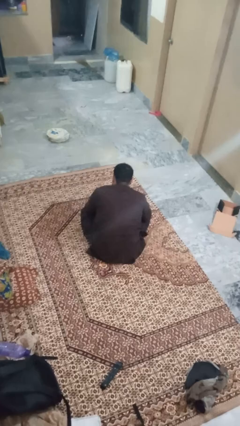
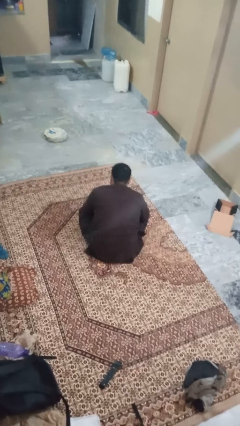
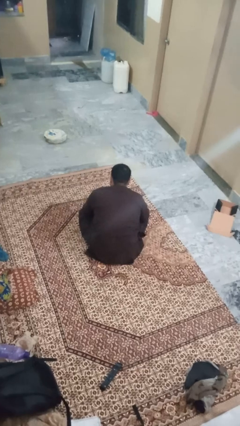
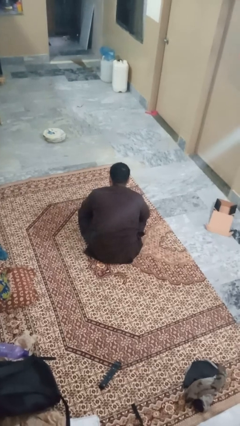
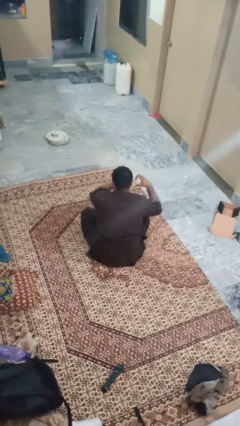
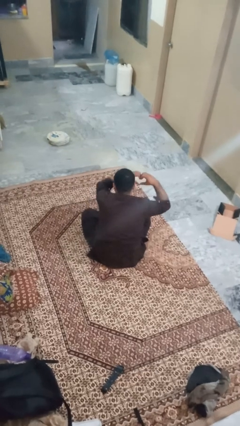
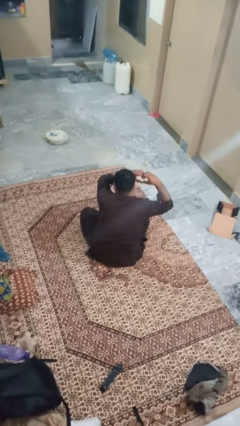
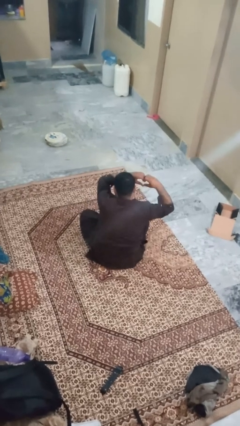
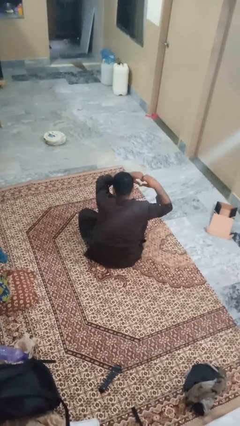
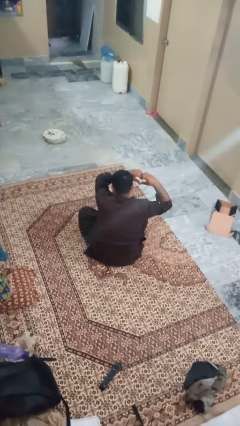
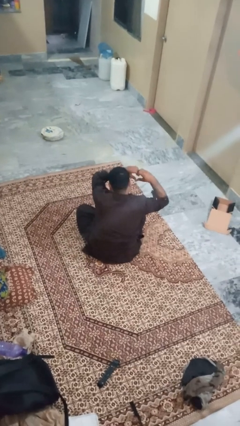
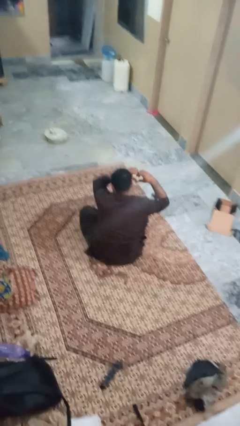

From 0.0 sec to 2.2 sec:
person gestures heart

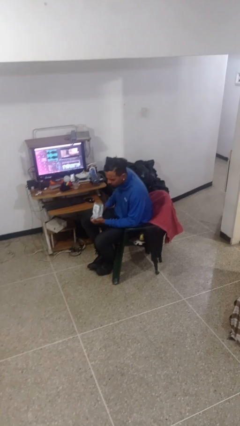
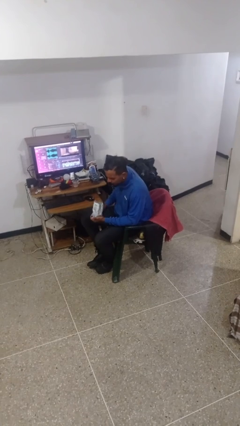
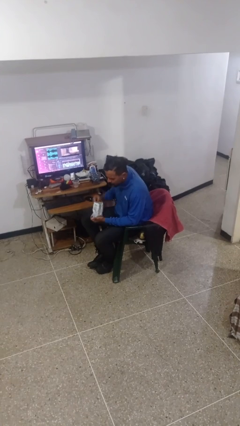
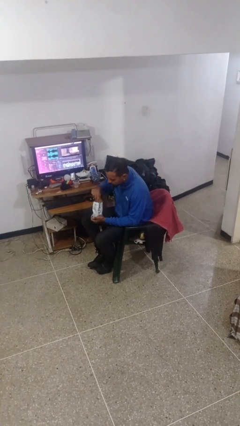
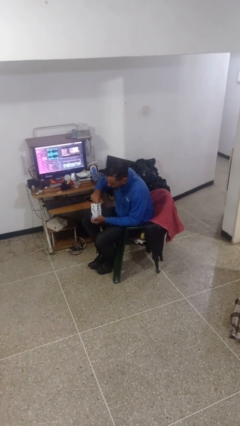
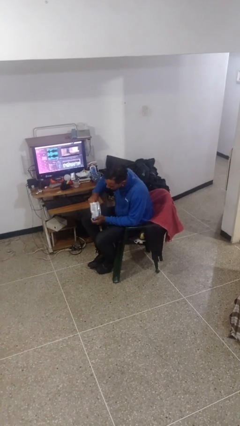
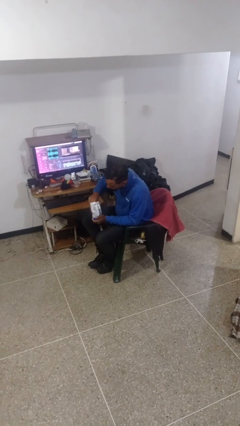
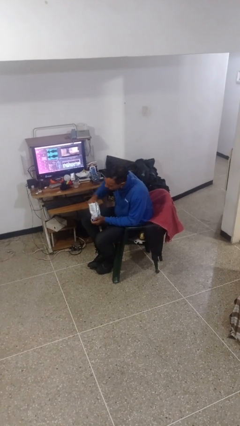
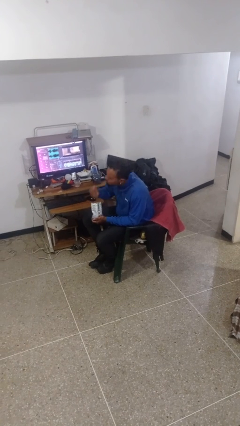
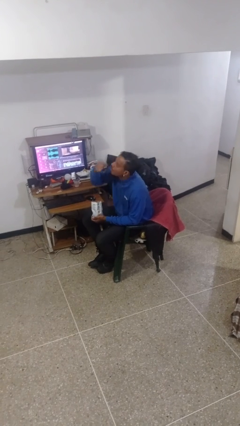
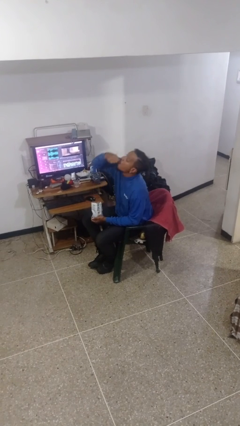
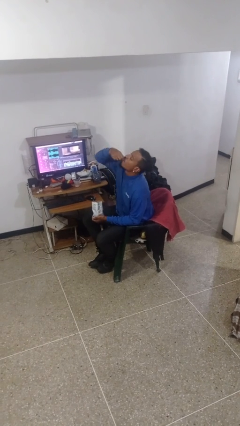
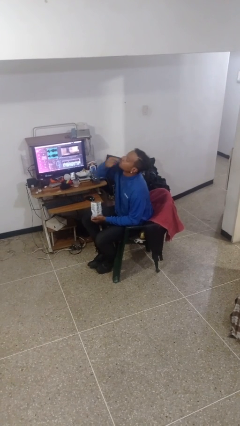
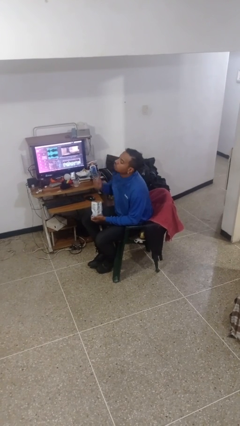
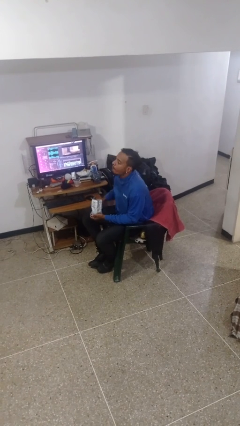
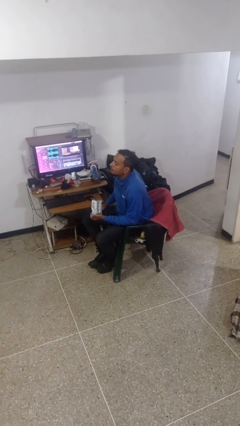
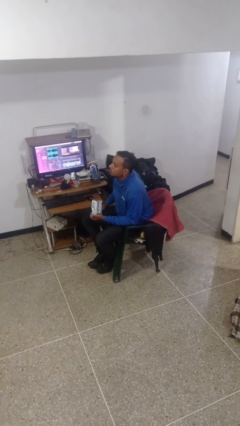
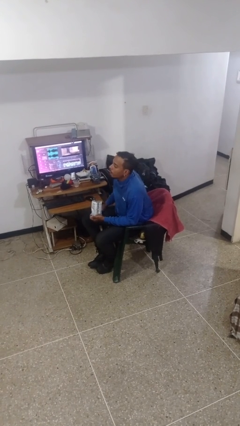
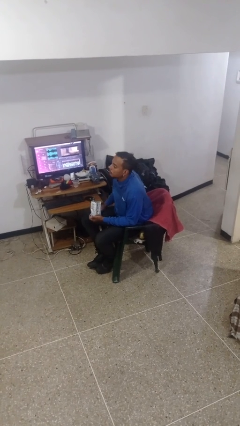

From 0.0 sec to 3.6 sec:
person eats snack from bag

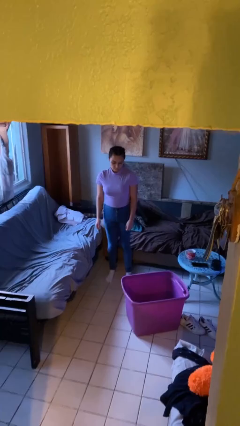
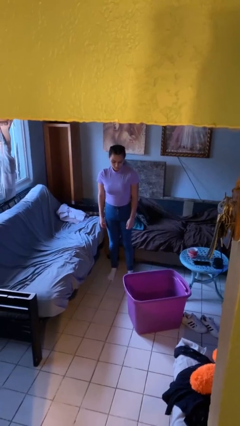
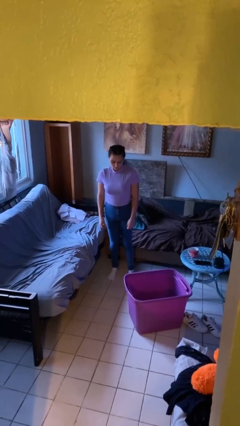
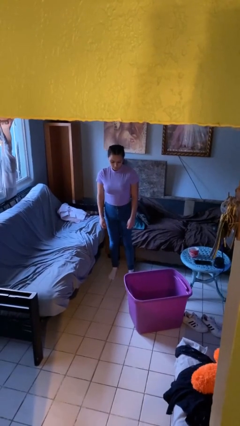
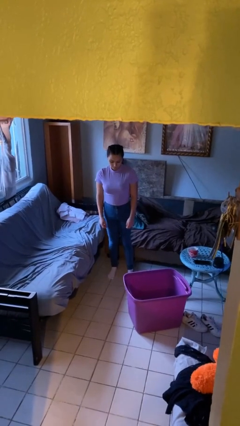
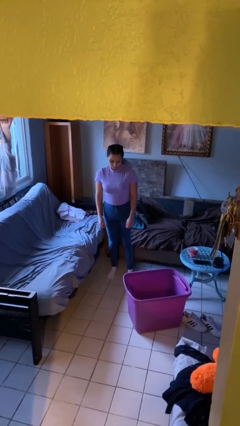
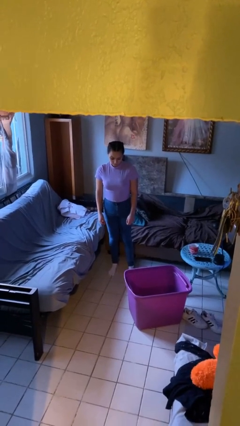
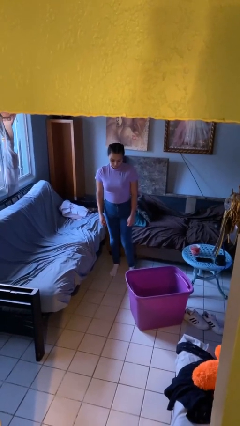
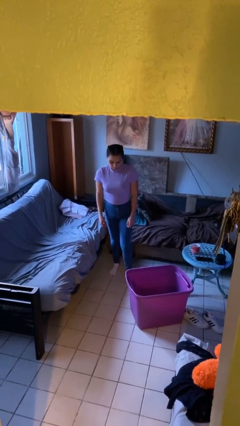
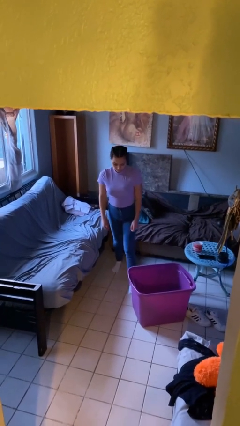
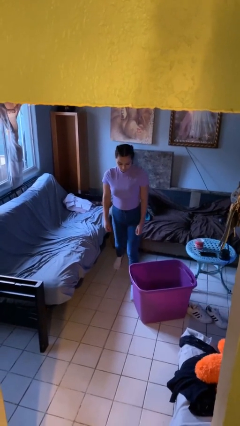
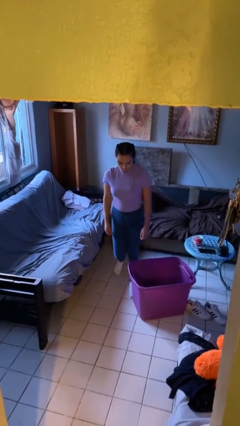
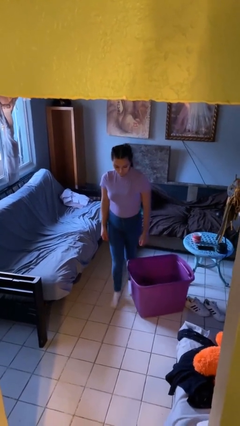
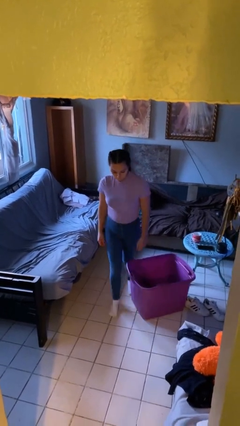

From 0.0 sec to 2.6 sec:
person trips on object on floor

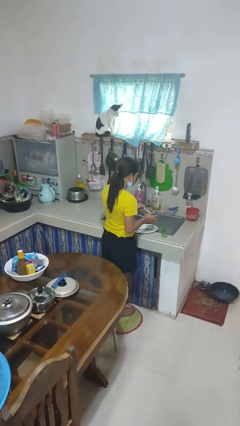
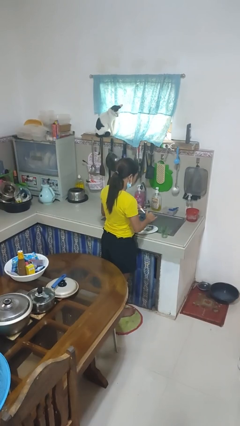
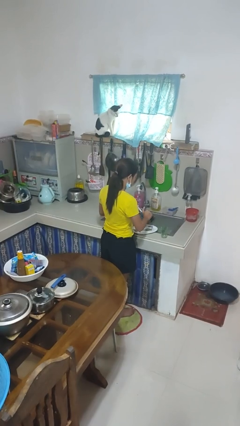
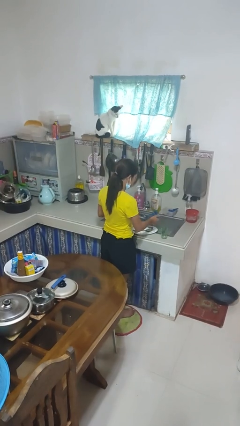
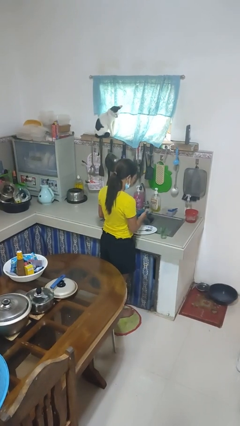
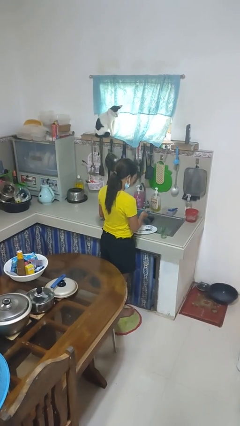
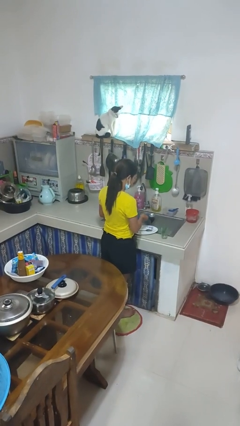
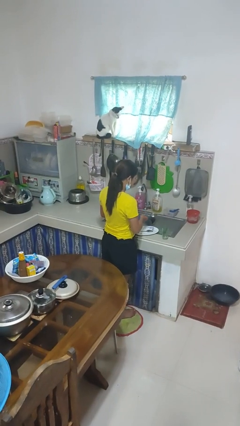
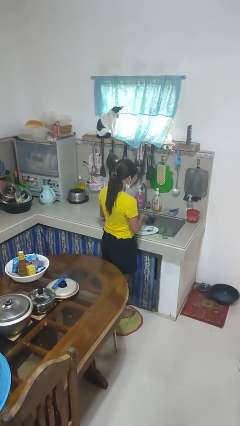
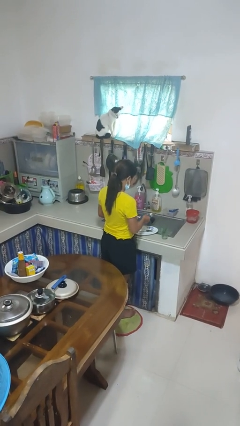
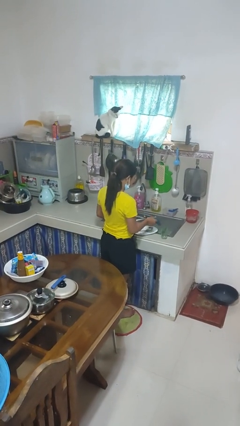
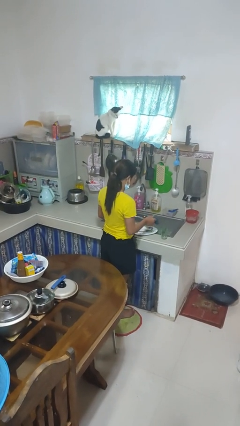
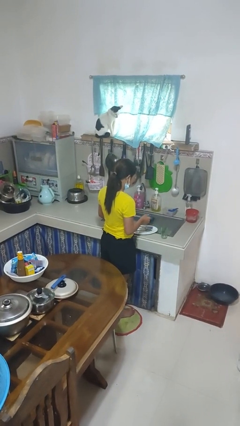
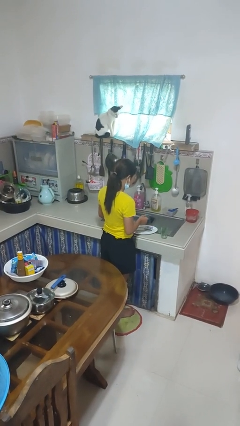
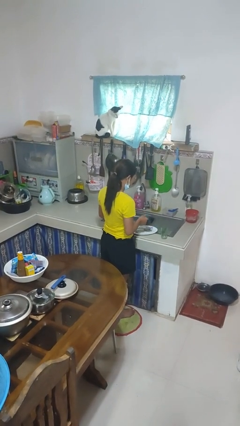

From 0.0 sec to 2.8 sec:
person dries dish

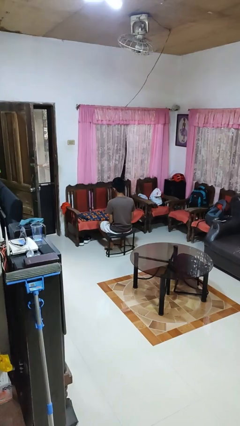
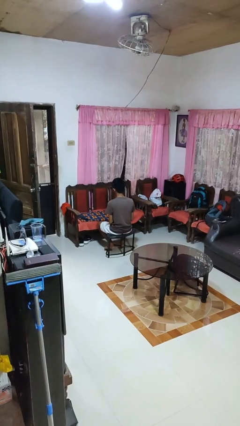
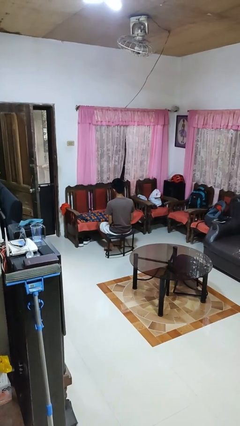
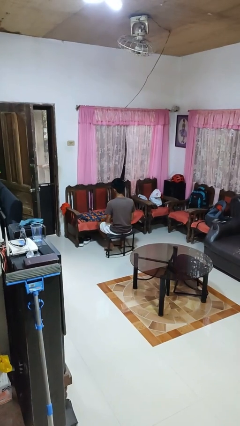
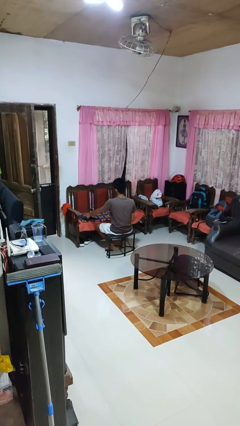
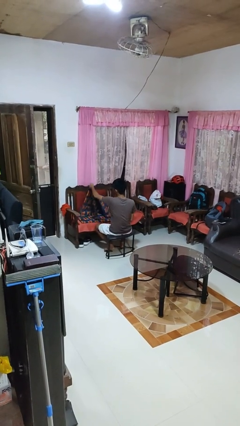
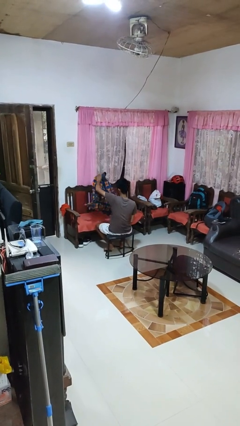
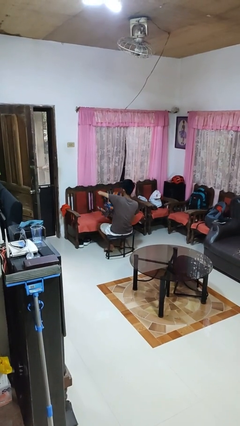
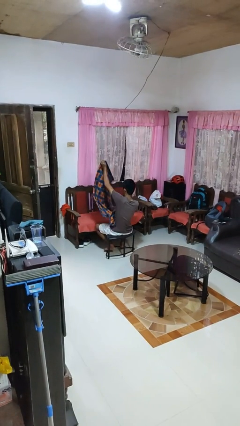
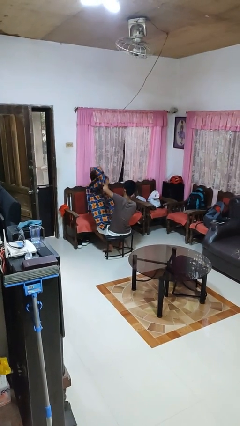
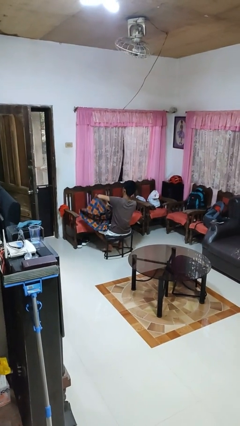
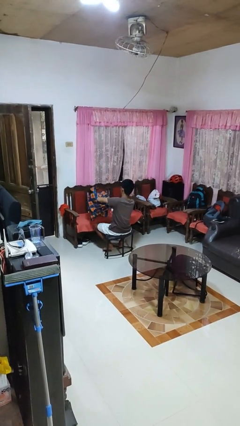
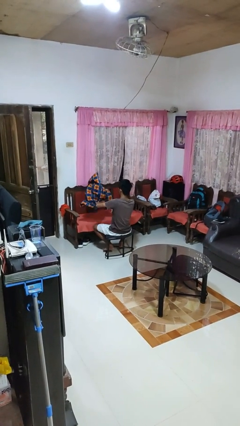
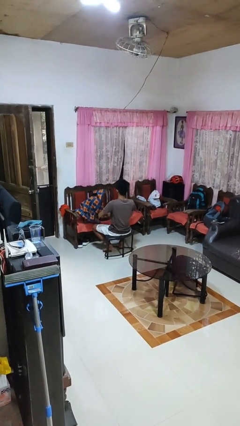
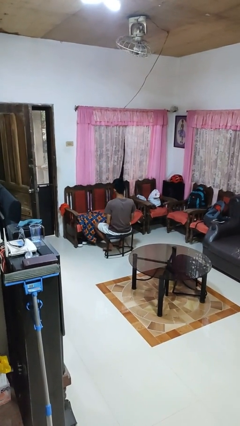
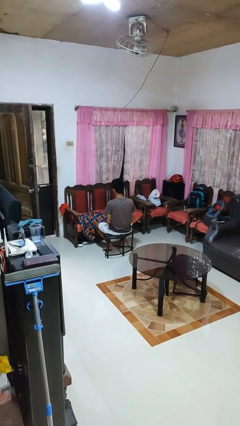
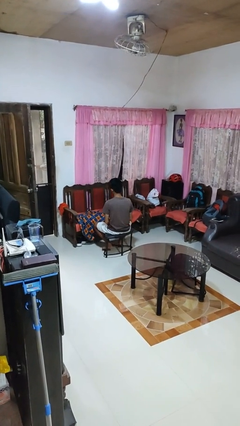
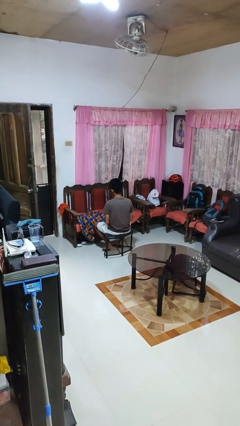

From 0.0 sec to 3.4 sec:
person unfolds blanket

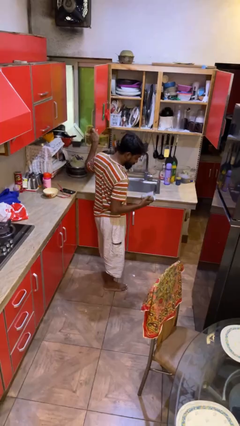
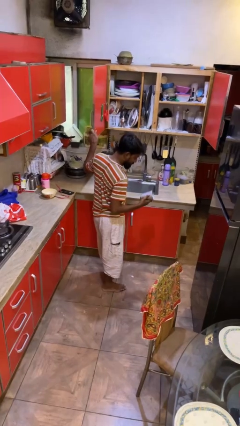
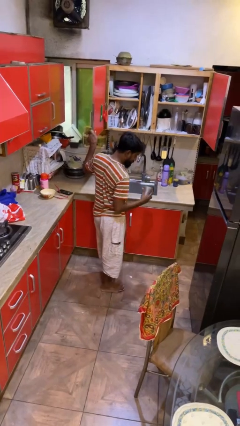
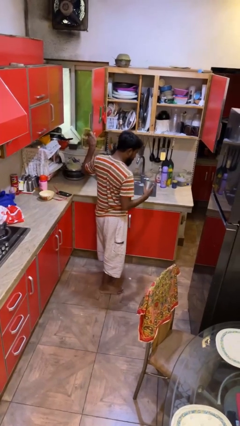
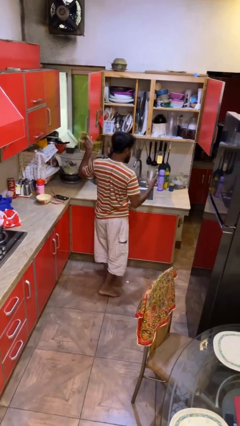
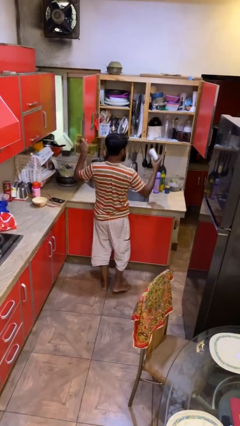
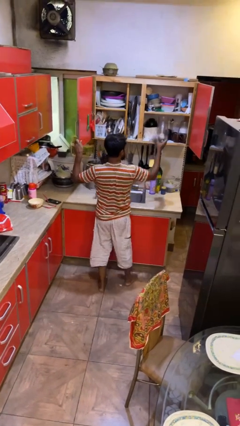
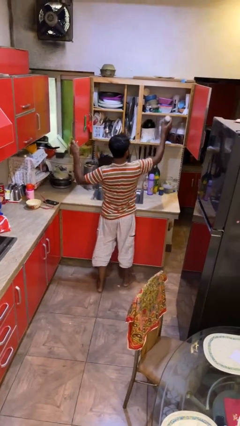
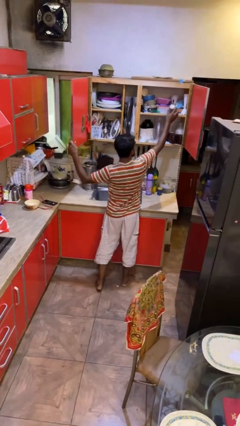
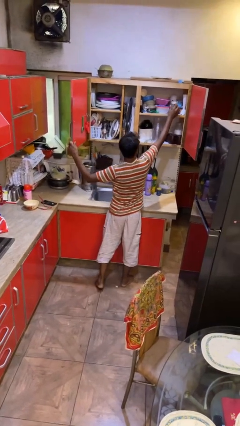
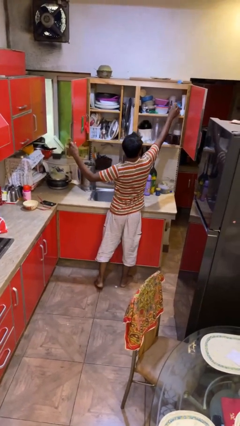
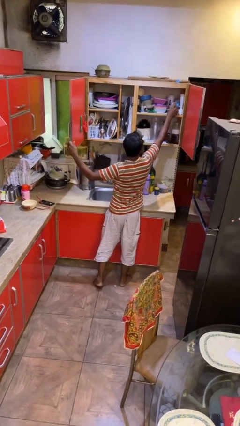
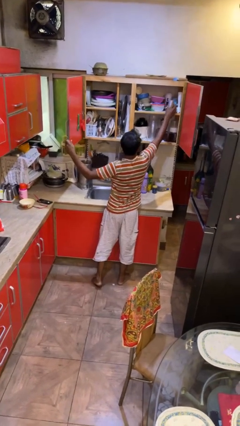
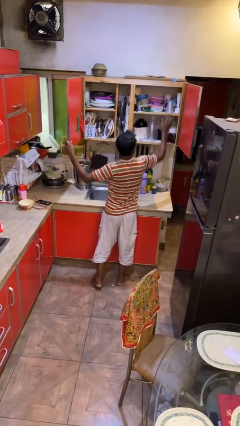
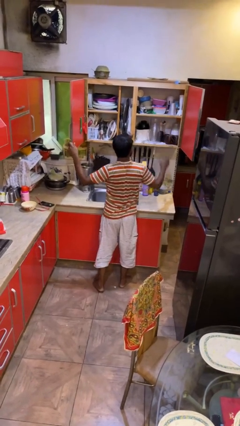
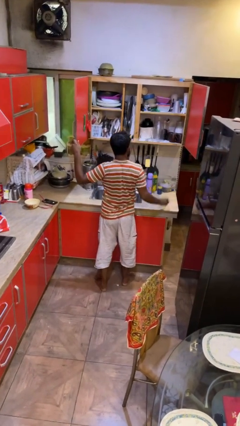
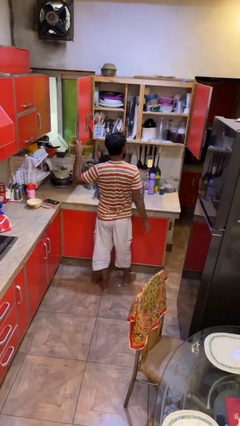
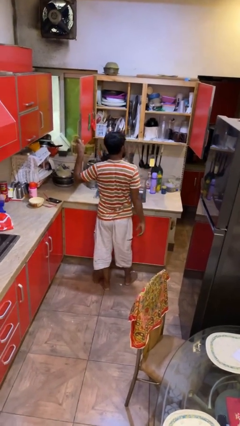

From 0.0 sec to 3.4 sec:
person puts down object into cabinet
